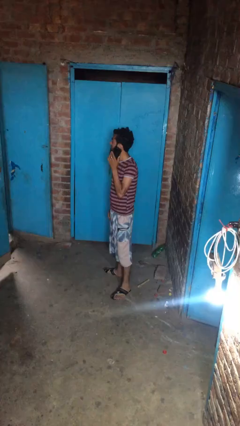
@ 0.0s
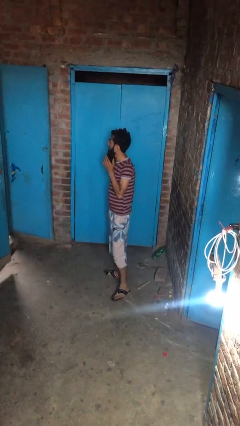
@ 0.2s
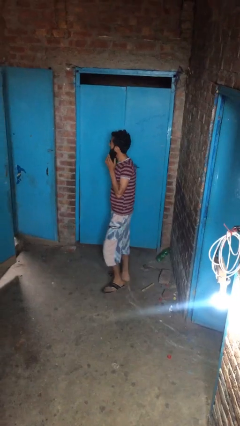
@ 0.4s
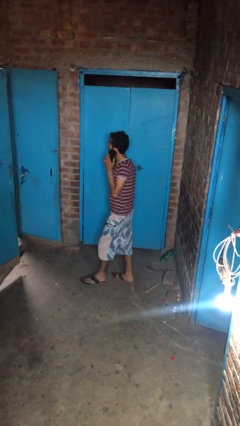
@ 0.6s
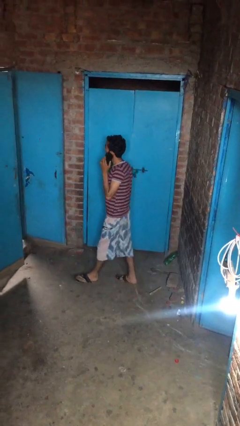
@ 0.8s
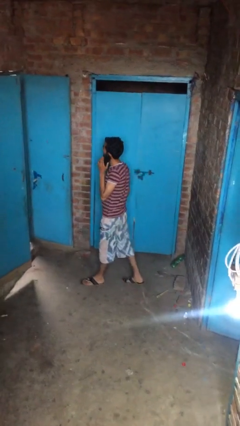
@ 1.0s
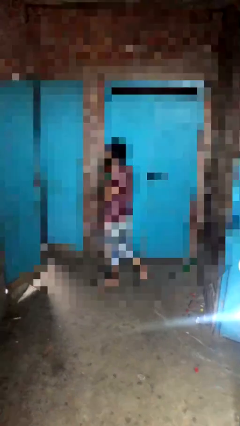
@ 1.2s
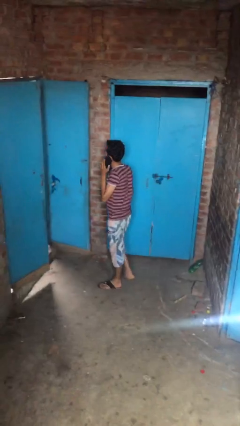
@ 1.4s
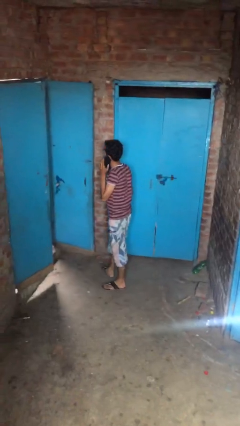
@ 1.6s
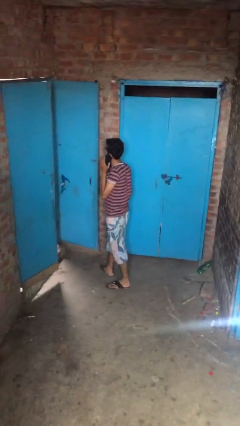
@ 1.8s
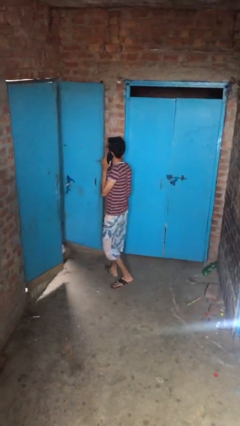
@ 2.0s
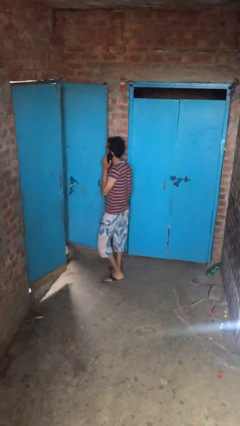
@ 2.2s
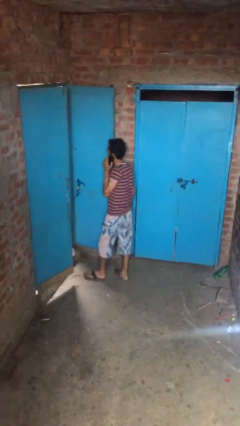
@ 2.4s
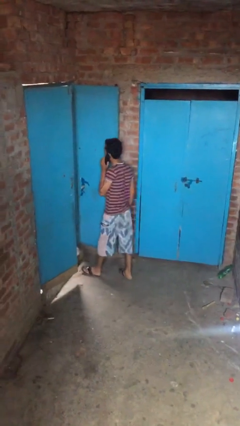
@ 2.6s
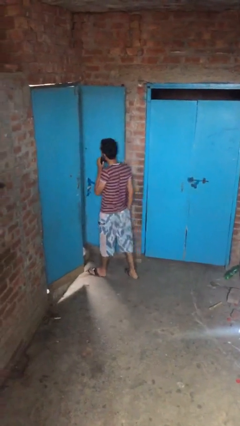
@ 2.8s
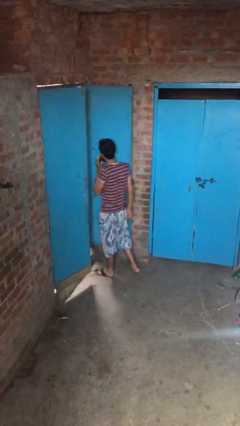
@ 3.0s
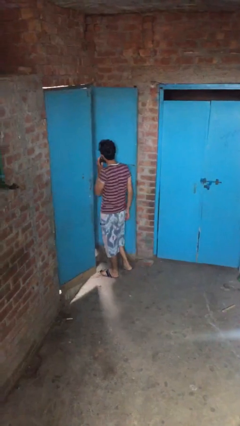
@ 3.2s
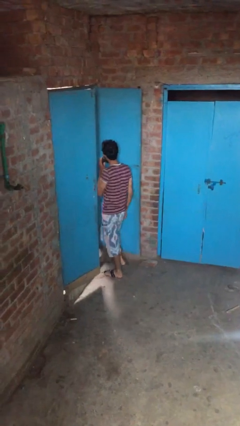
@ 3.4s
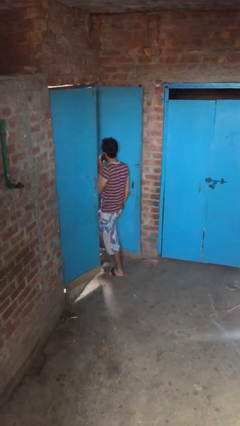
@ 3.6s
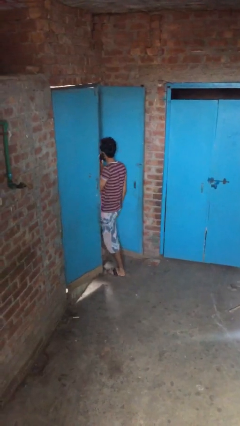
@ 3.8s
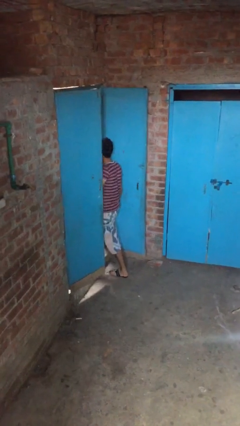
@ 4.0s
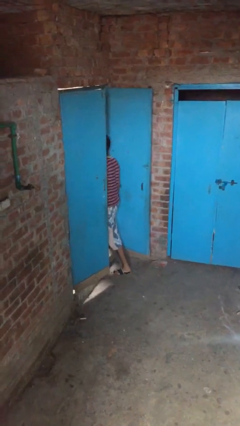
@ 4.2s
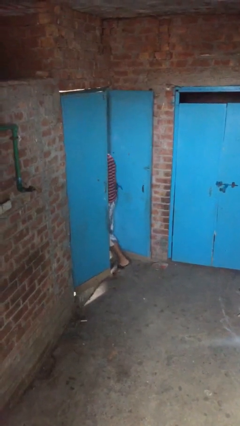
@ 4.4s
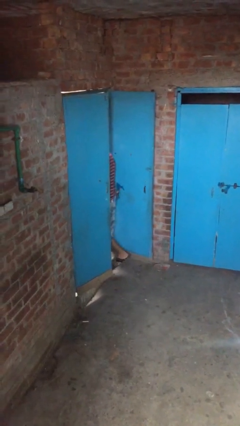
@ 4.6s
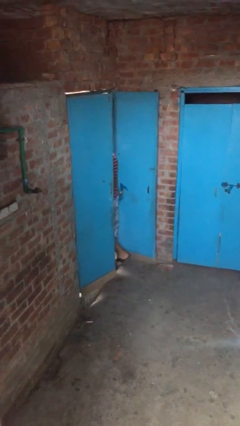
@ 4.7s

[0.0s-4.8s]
person exits scene through structure

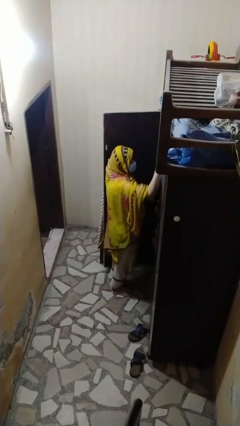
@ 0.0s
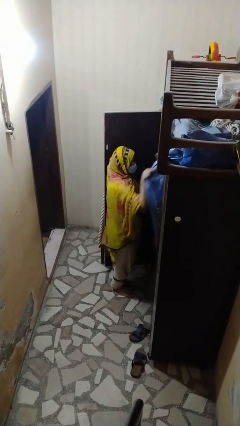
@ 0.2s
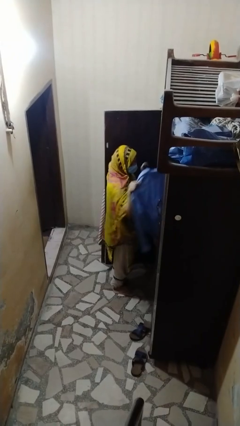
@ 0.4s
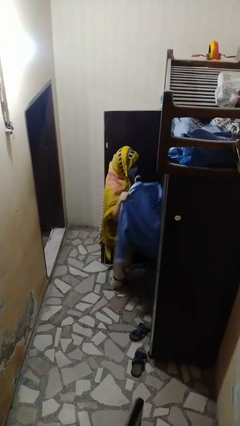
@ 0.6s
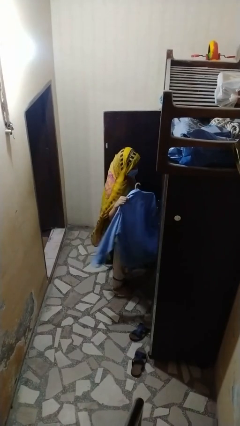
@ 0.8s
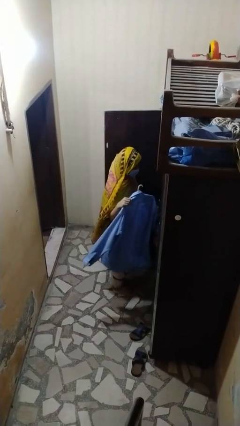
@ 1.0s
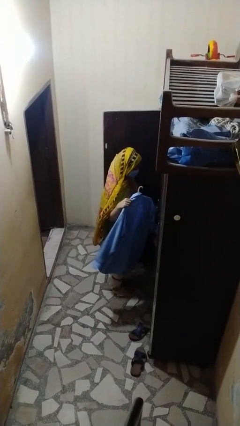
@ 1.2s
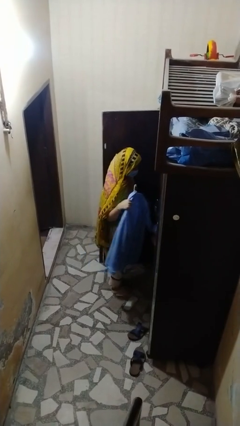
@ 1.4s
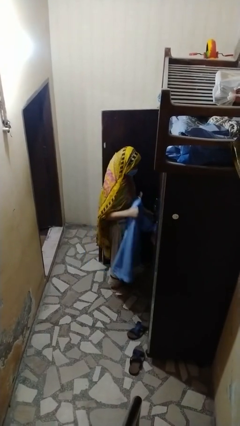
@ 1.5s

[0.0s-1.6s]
person takes clothes from closet

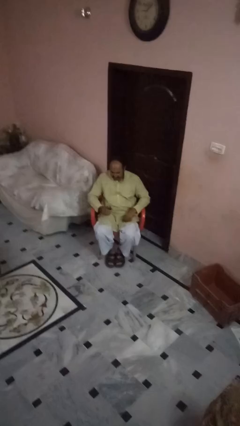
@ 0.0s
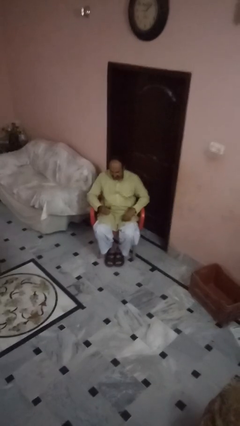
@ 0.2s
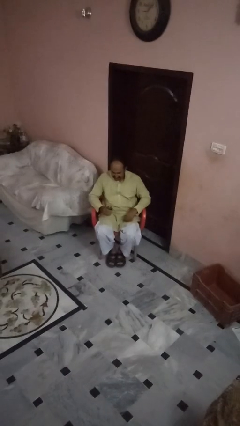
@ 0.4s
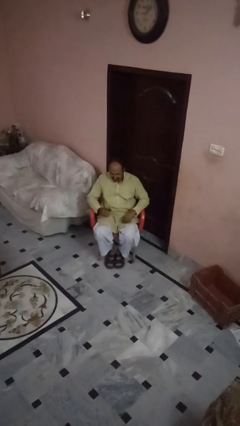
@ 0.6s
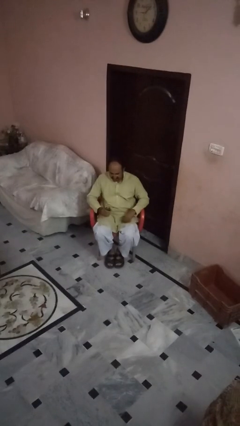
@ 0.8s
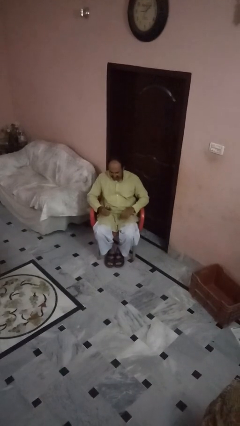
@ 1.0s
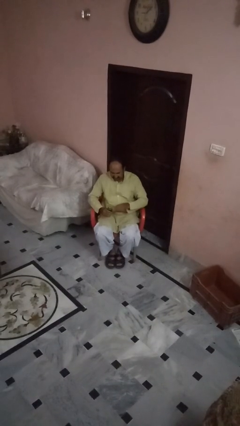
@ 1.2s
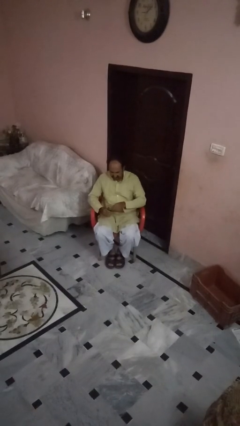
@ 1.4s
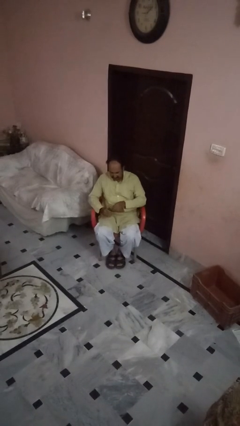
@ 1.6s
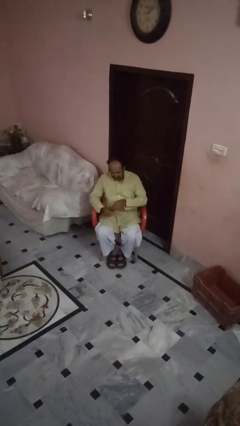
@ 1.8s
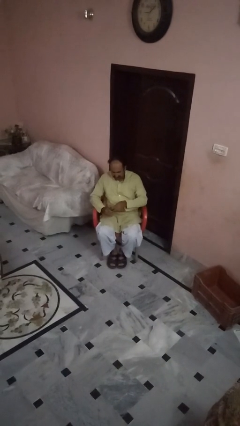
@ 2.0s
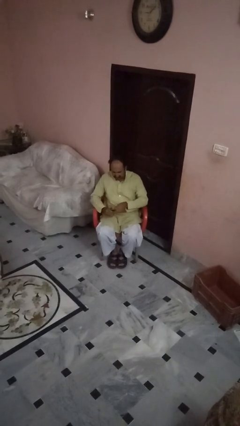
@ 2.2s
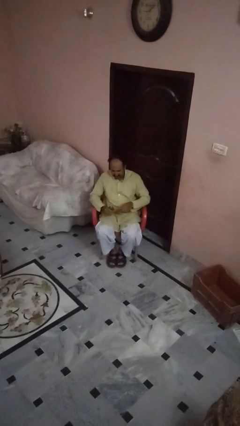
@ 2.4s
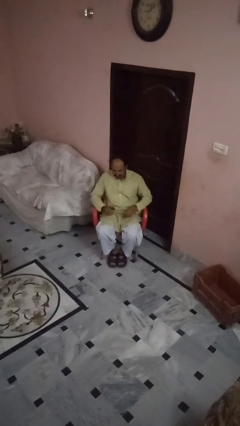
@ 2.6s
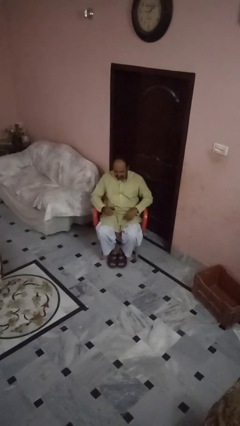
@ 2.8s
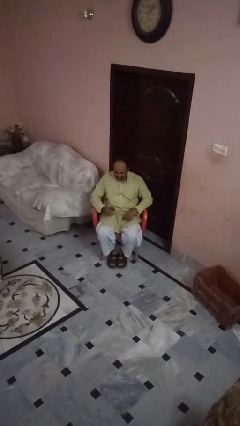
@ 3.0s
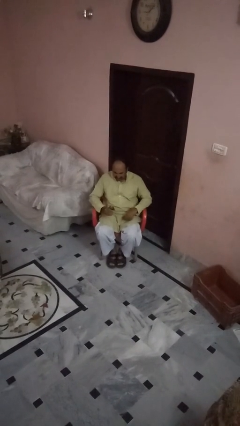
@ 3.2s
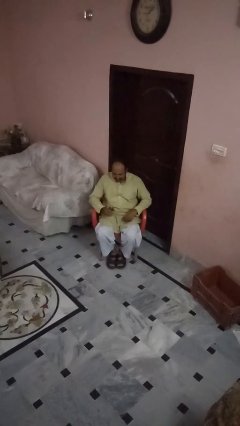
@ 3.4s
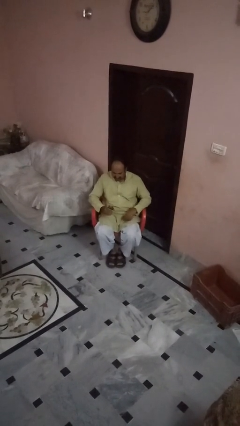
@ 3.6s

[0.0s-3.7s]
person opens beverage can

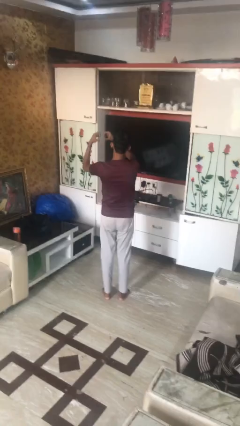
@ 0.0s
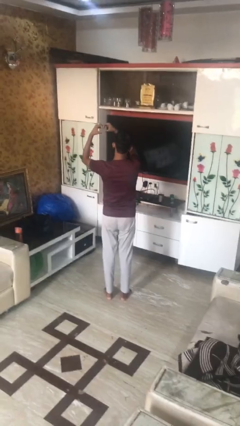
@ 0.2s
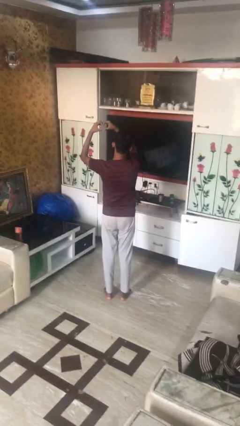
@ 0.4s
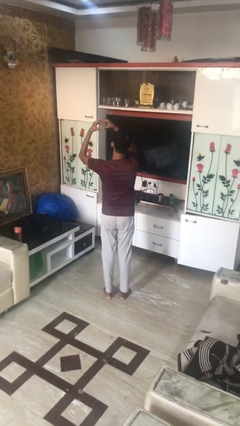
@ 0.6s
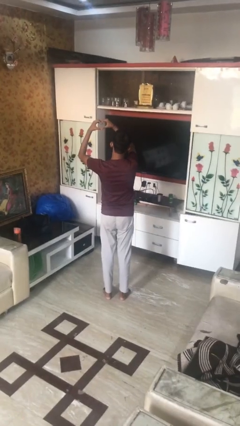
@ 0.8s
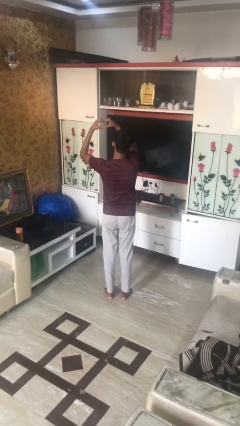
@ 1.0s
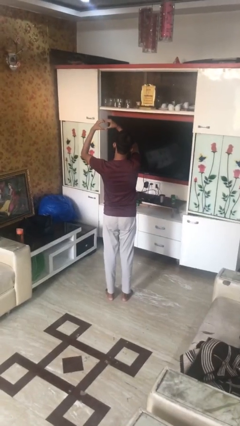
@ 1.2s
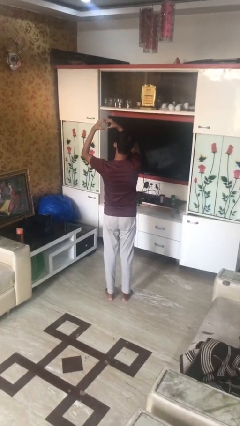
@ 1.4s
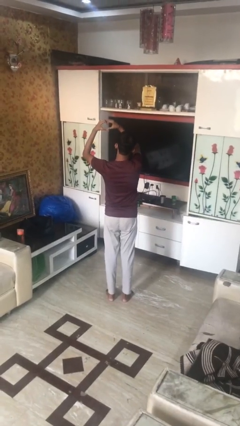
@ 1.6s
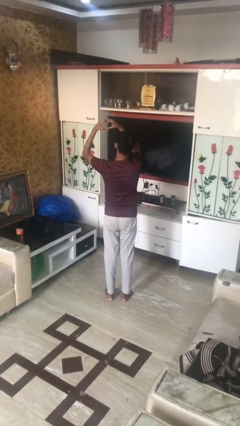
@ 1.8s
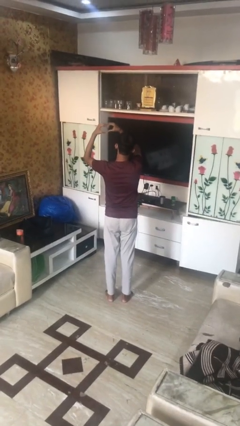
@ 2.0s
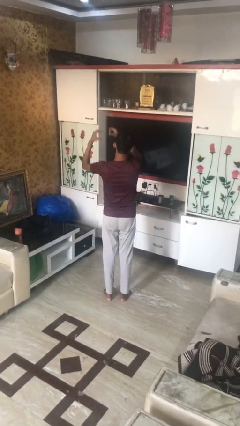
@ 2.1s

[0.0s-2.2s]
person gestures heart

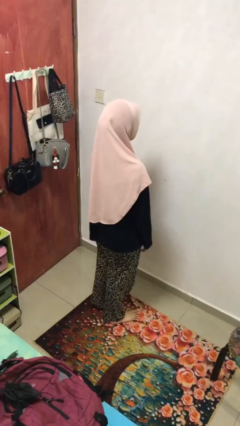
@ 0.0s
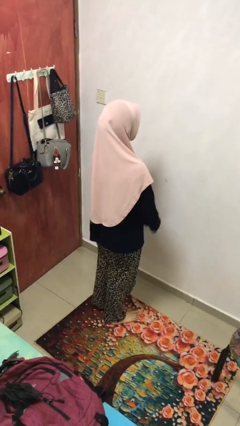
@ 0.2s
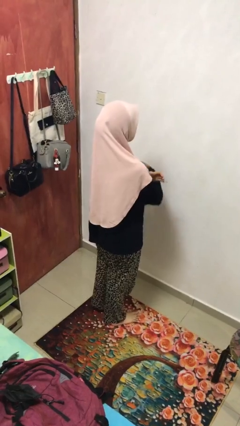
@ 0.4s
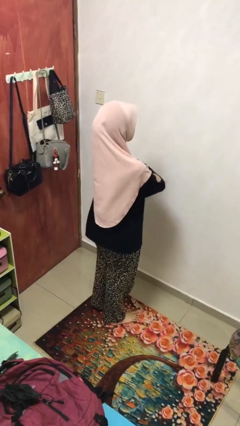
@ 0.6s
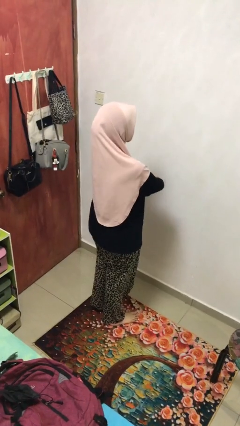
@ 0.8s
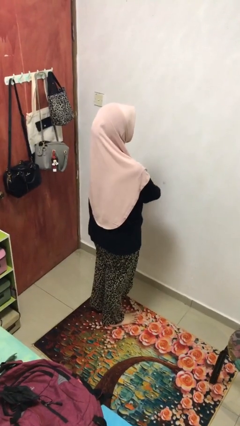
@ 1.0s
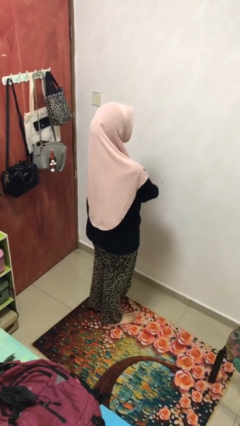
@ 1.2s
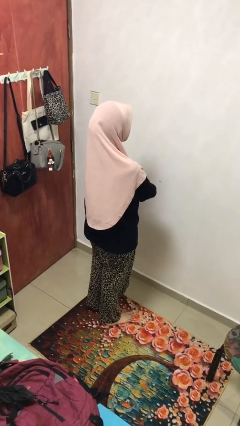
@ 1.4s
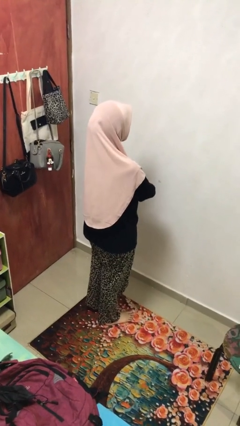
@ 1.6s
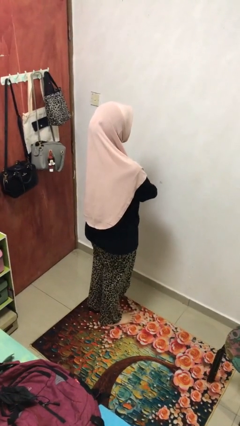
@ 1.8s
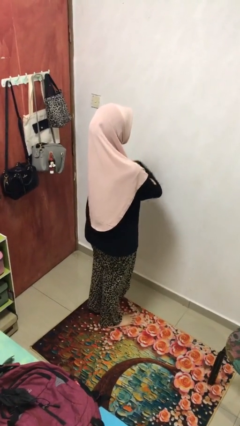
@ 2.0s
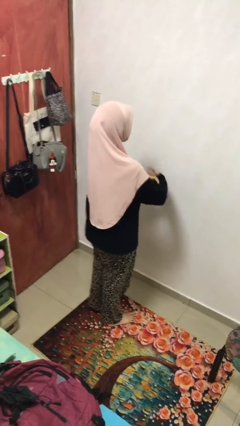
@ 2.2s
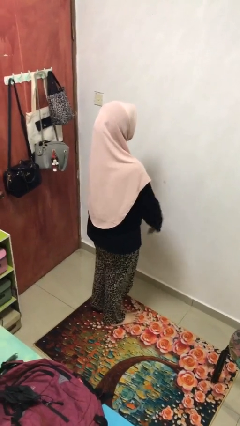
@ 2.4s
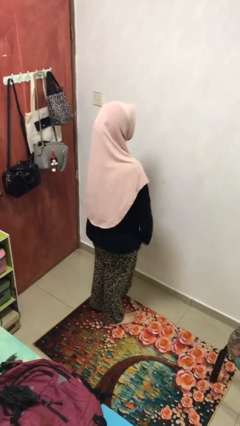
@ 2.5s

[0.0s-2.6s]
person crosses arms

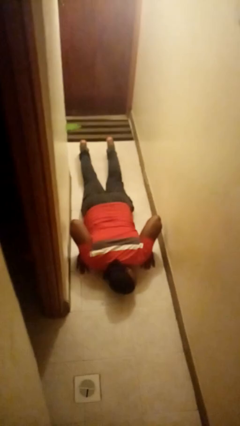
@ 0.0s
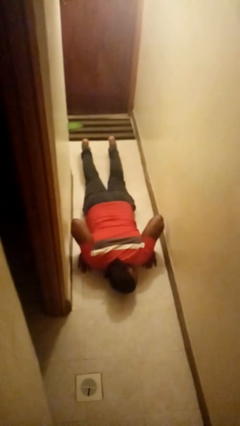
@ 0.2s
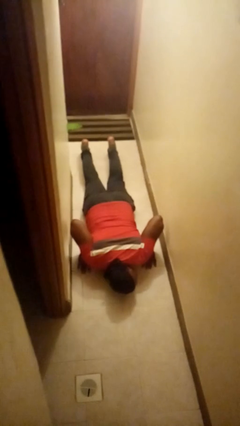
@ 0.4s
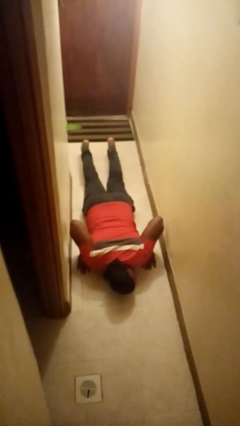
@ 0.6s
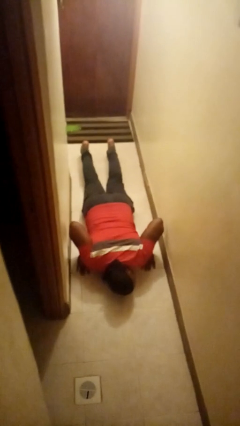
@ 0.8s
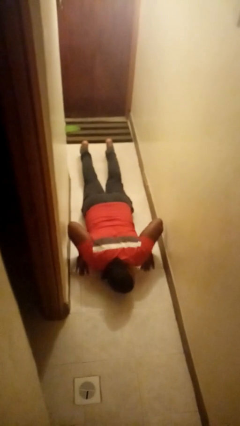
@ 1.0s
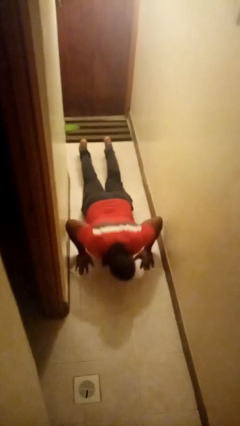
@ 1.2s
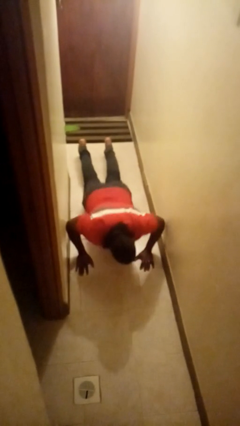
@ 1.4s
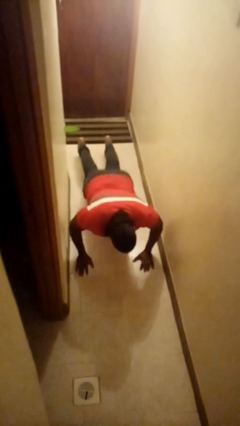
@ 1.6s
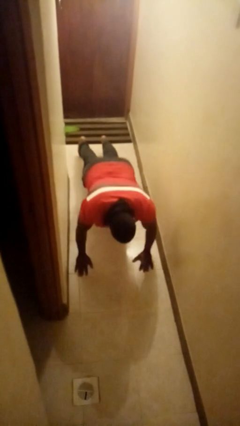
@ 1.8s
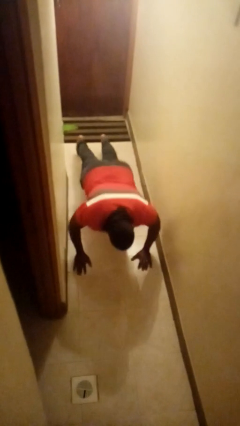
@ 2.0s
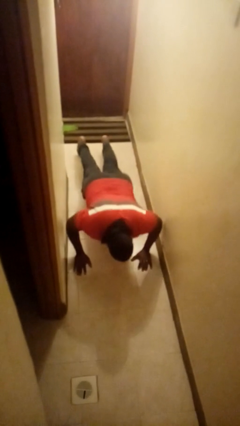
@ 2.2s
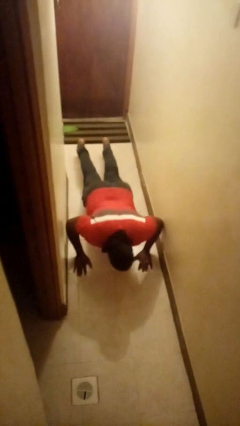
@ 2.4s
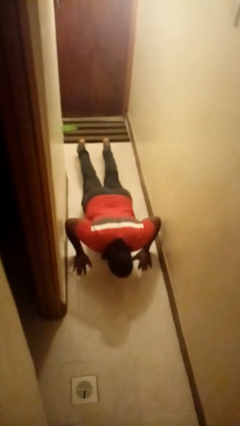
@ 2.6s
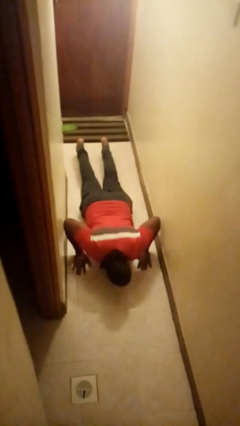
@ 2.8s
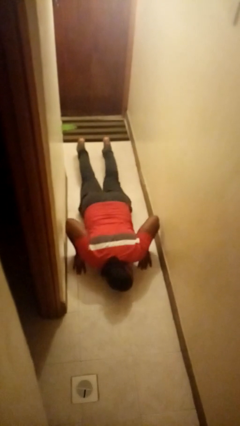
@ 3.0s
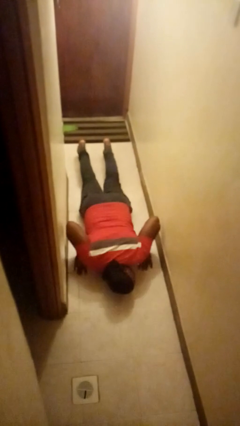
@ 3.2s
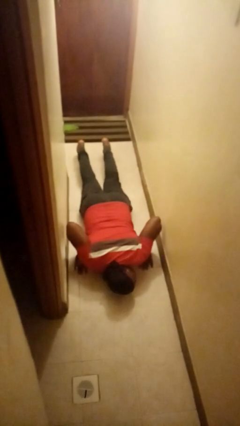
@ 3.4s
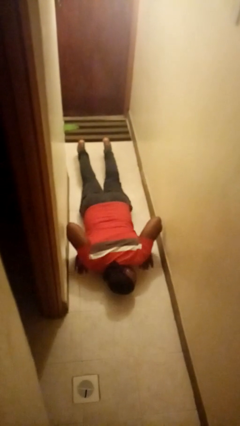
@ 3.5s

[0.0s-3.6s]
person exercises with pushup
